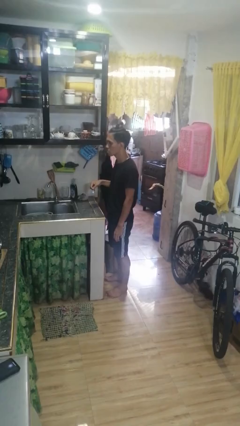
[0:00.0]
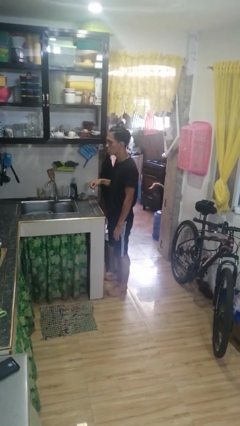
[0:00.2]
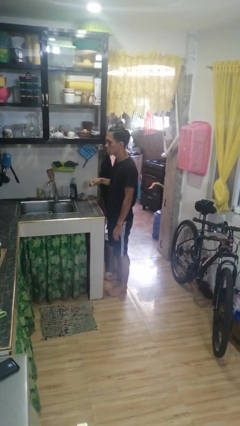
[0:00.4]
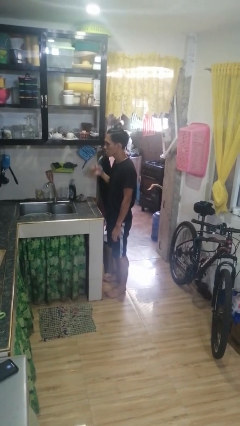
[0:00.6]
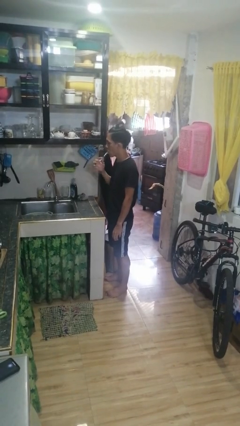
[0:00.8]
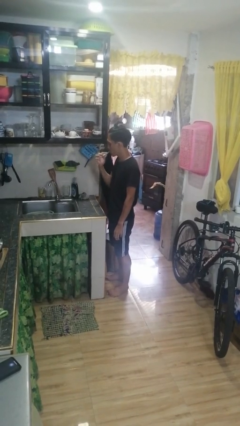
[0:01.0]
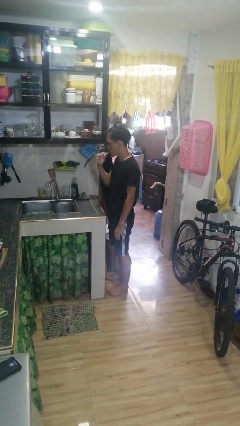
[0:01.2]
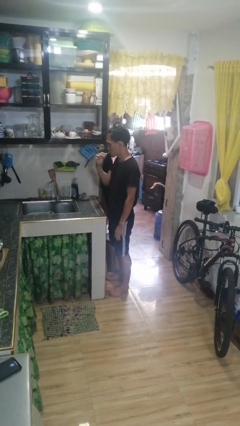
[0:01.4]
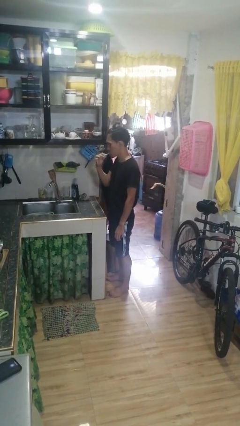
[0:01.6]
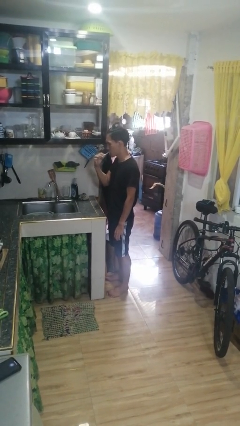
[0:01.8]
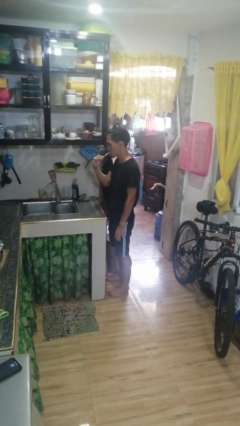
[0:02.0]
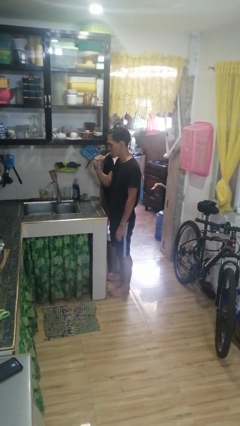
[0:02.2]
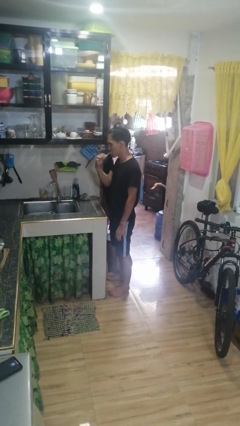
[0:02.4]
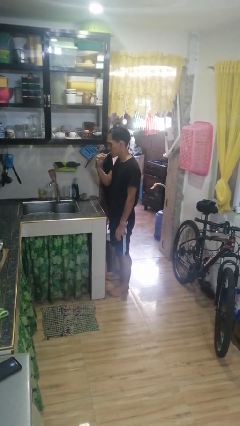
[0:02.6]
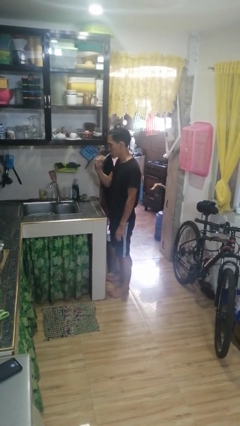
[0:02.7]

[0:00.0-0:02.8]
person brushes teeth

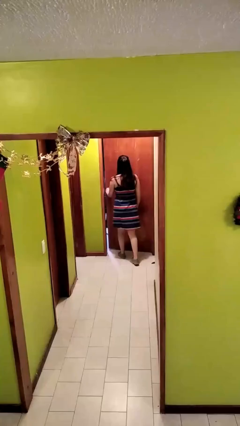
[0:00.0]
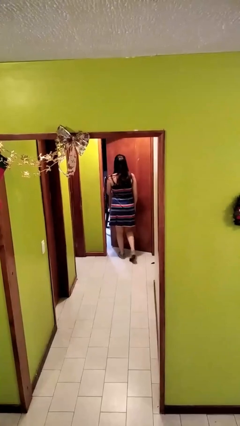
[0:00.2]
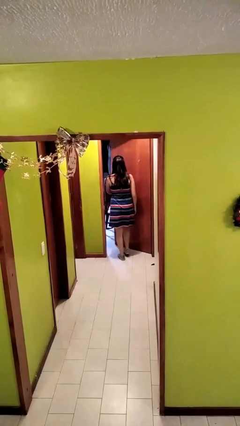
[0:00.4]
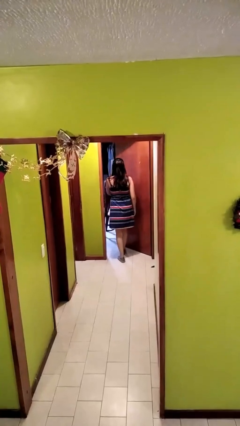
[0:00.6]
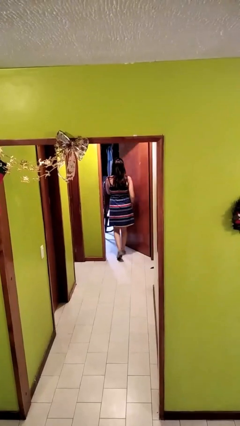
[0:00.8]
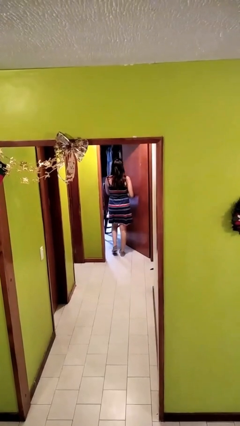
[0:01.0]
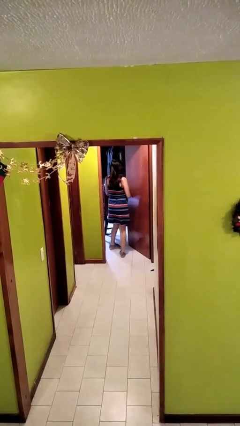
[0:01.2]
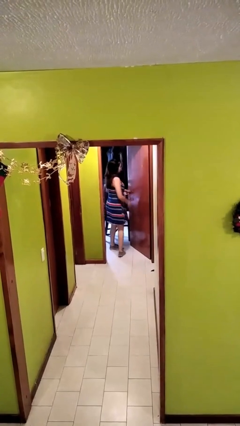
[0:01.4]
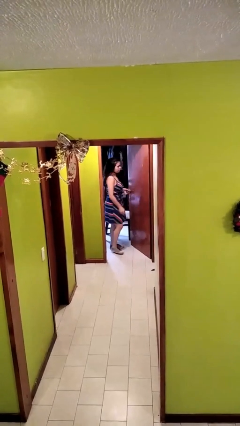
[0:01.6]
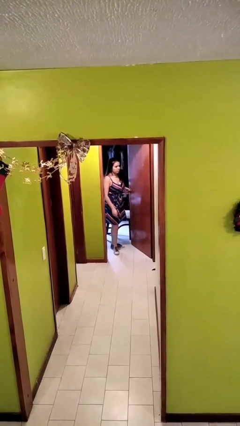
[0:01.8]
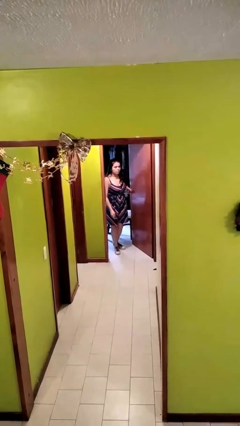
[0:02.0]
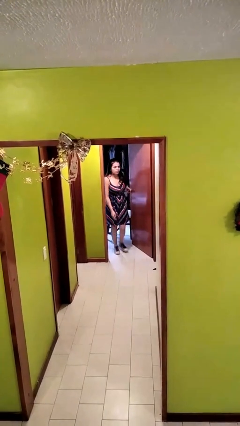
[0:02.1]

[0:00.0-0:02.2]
person opens facility door

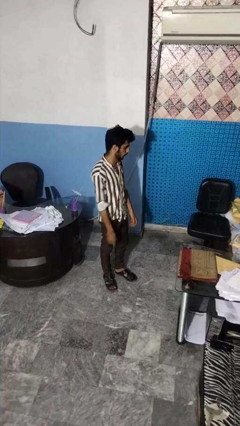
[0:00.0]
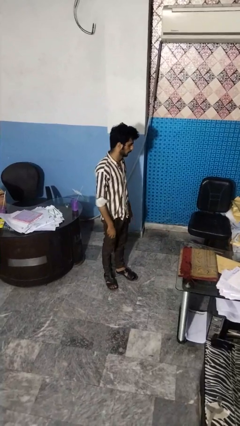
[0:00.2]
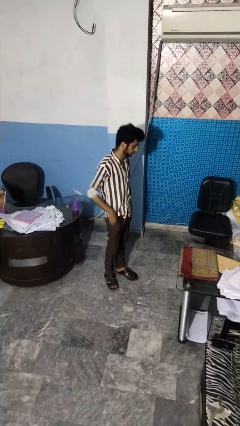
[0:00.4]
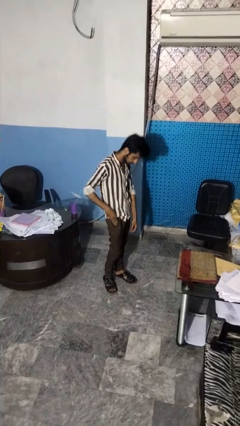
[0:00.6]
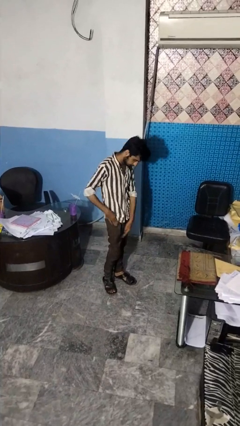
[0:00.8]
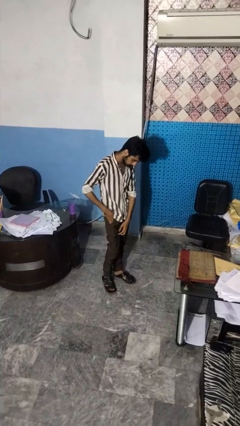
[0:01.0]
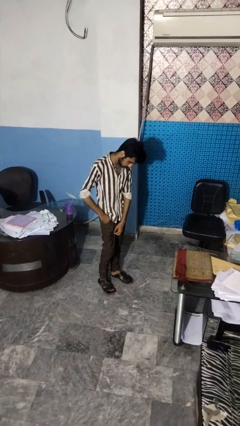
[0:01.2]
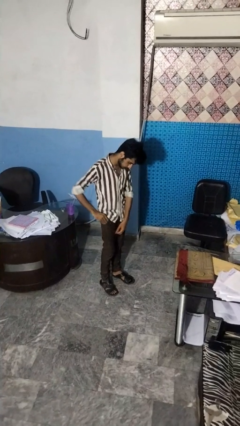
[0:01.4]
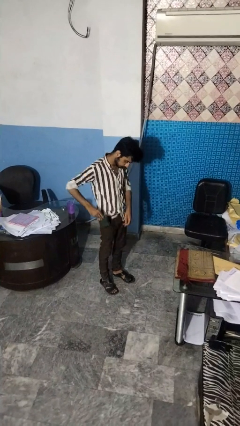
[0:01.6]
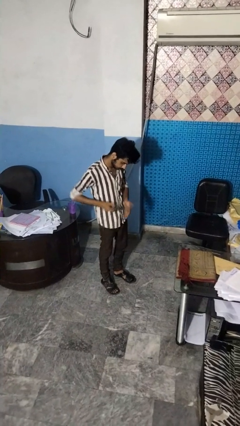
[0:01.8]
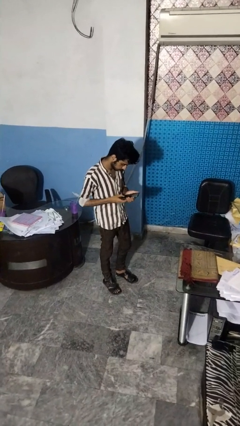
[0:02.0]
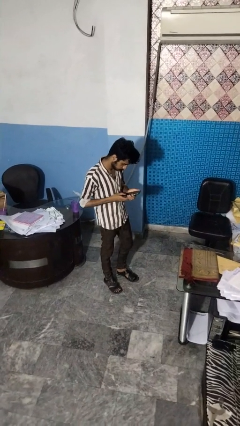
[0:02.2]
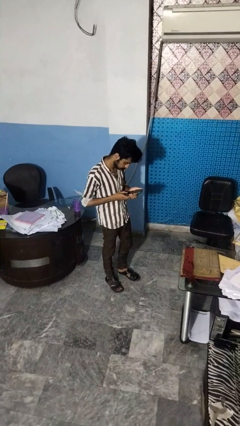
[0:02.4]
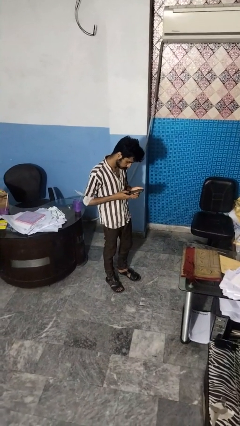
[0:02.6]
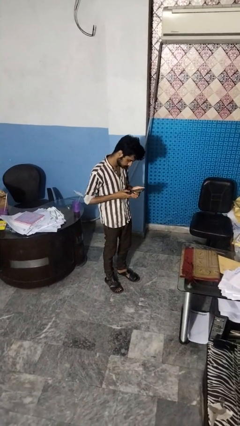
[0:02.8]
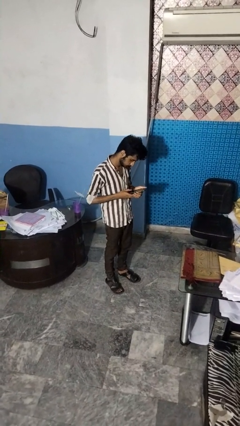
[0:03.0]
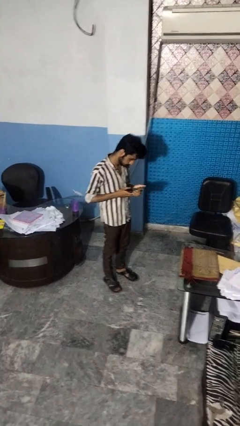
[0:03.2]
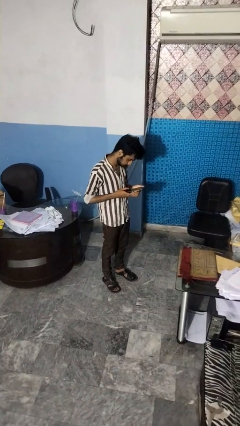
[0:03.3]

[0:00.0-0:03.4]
person takes phone from pocket

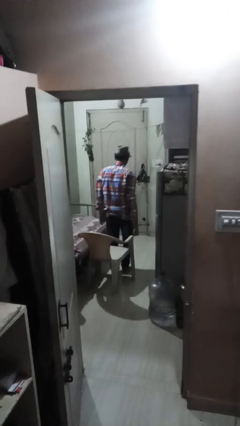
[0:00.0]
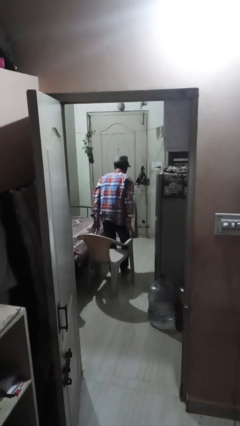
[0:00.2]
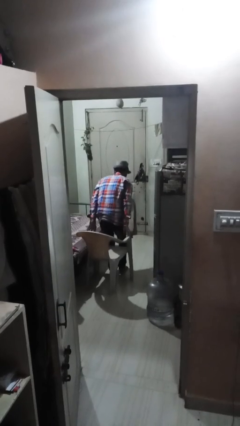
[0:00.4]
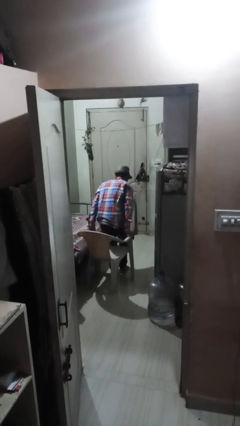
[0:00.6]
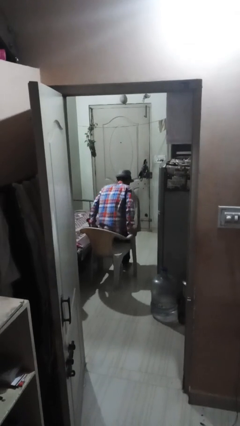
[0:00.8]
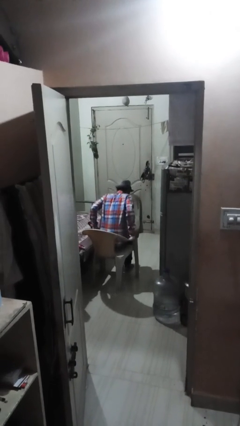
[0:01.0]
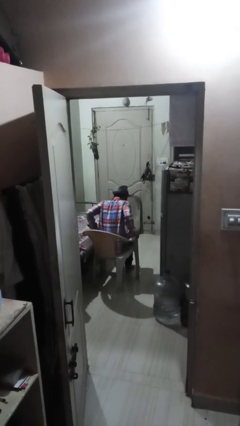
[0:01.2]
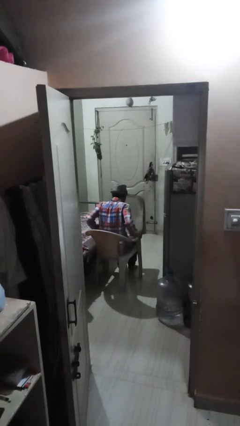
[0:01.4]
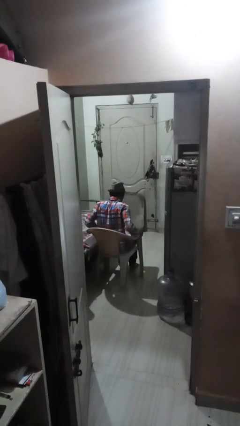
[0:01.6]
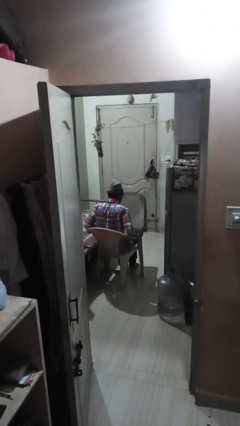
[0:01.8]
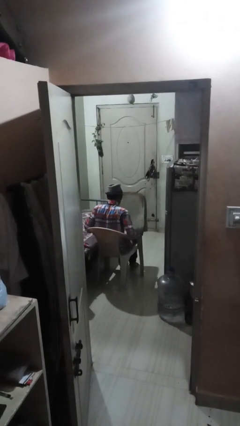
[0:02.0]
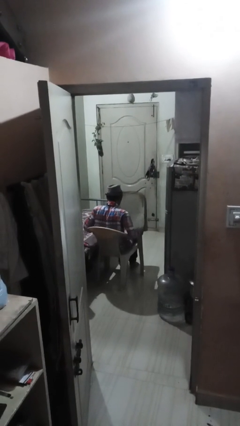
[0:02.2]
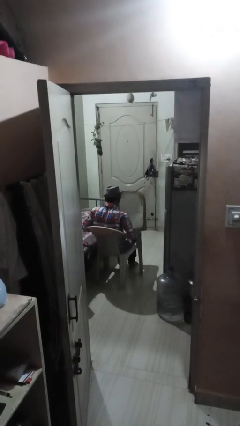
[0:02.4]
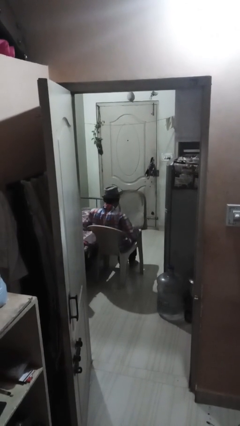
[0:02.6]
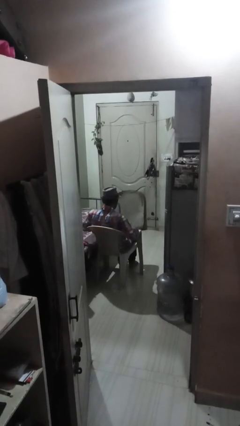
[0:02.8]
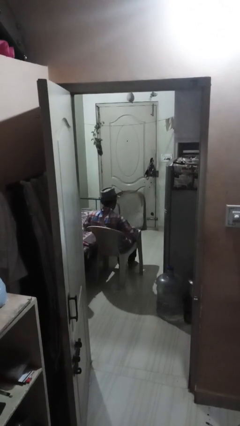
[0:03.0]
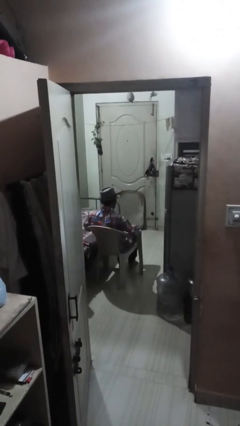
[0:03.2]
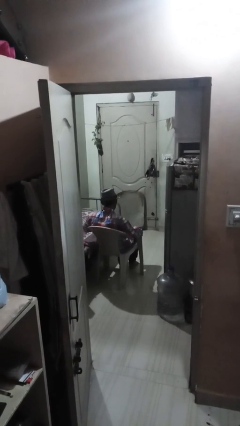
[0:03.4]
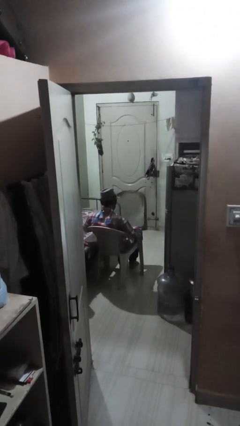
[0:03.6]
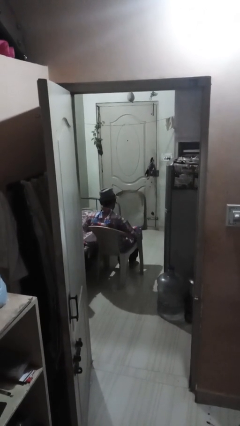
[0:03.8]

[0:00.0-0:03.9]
person sits down

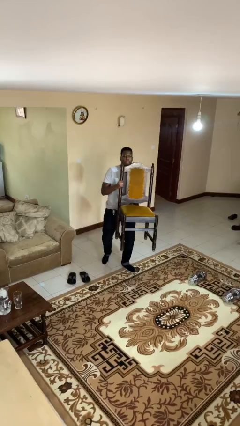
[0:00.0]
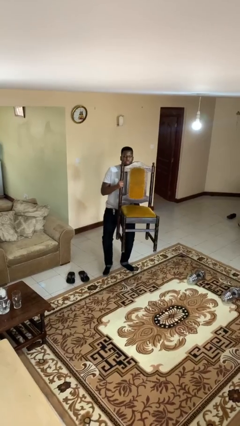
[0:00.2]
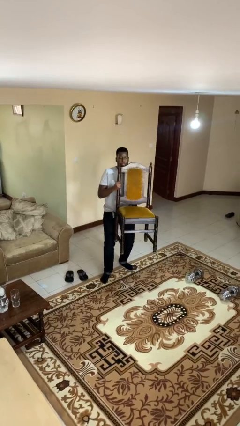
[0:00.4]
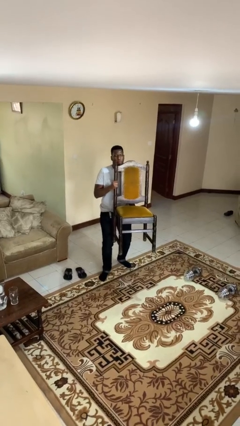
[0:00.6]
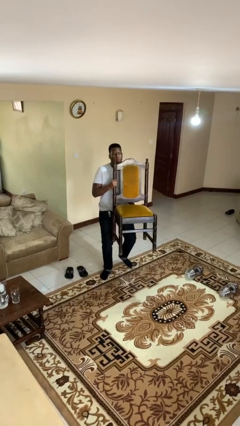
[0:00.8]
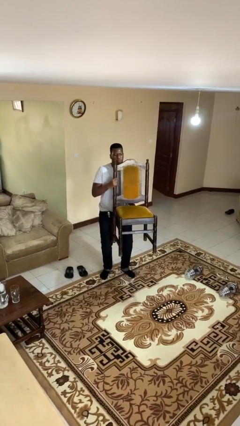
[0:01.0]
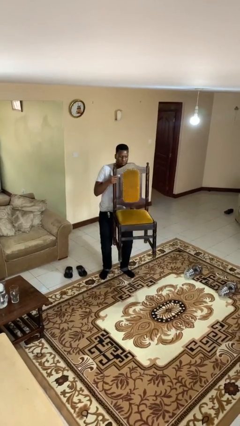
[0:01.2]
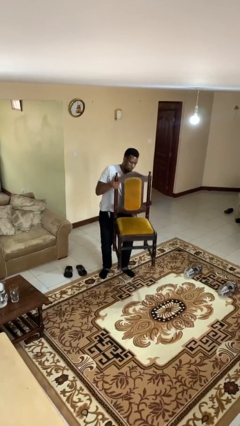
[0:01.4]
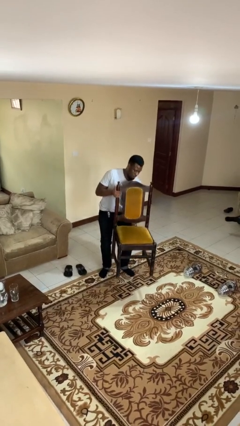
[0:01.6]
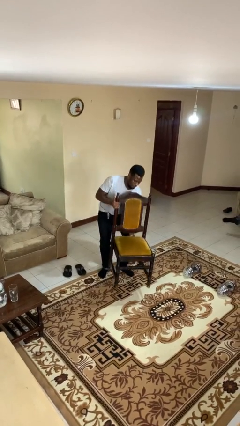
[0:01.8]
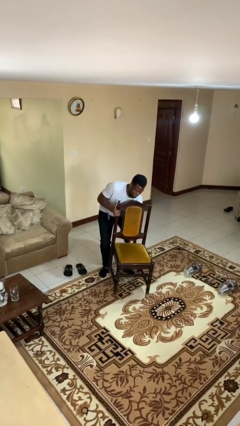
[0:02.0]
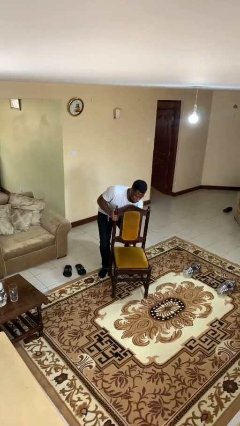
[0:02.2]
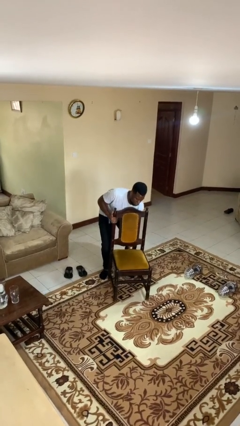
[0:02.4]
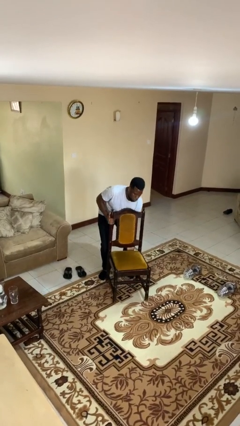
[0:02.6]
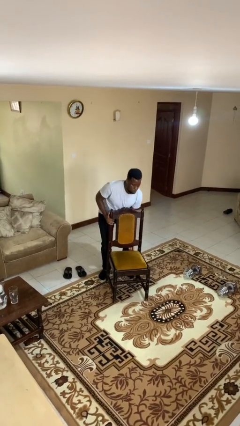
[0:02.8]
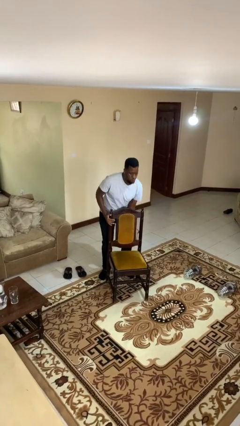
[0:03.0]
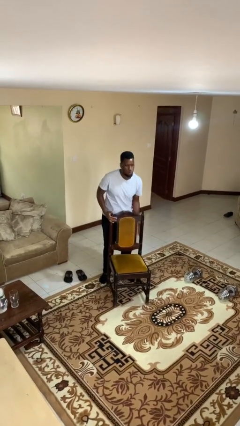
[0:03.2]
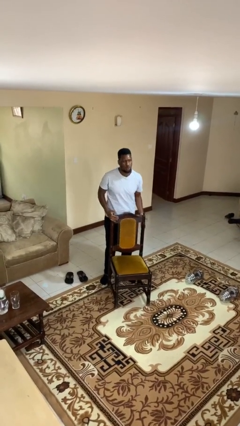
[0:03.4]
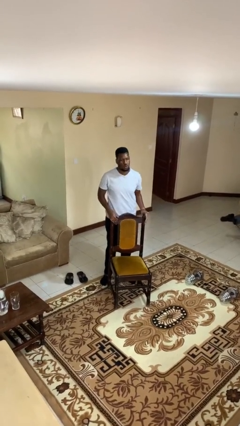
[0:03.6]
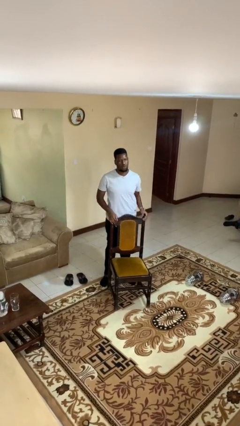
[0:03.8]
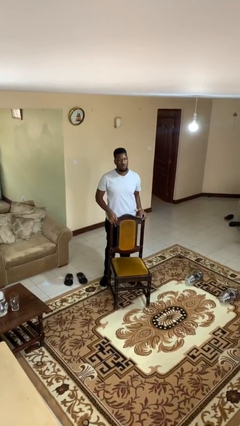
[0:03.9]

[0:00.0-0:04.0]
person puts down object on floor

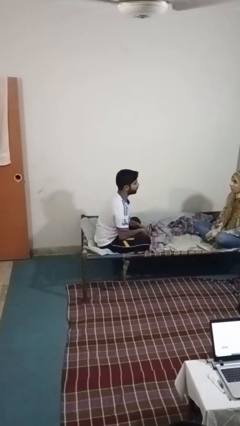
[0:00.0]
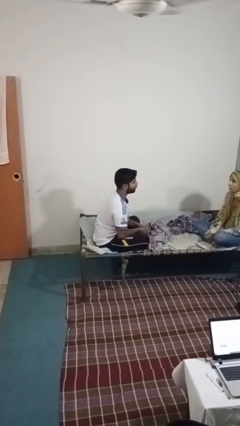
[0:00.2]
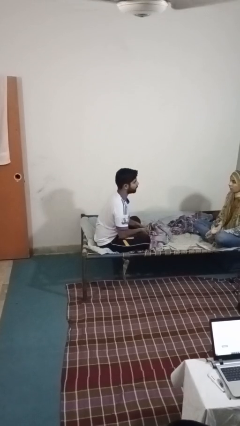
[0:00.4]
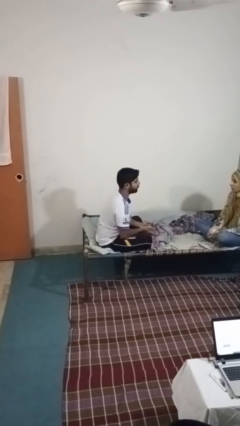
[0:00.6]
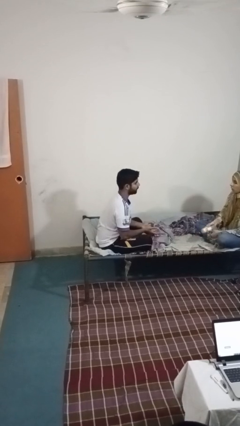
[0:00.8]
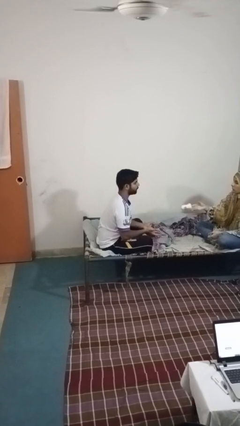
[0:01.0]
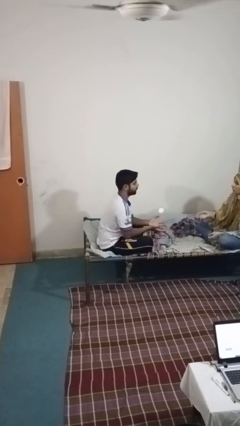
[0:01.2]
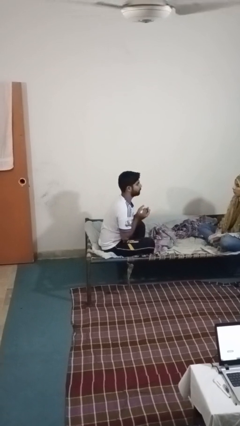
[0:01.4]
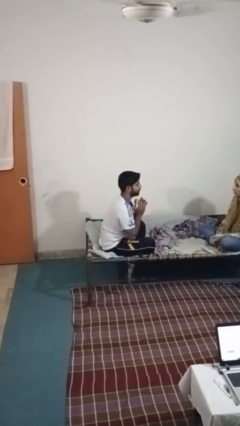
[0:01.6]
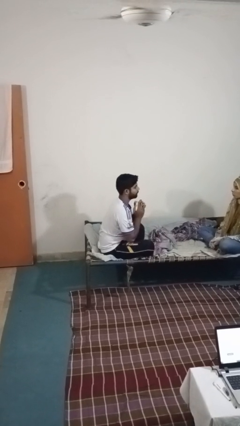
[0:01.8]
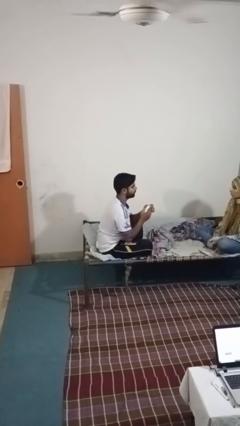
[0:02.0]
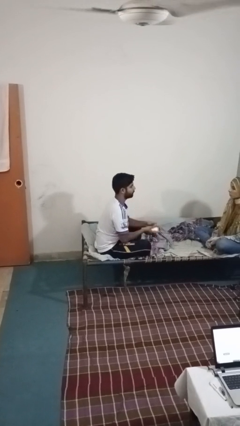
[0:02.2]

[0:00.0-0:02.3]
person catches object from person
